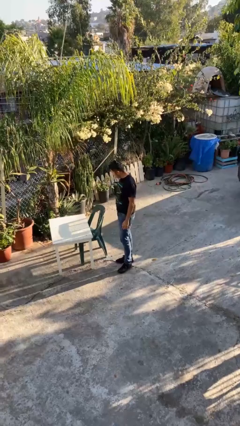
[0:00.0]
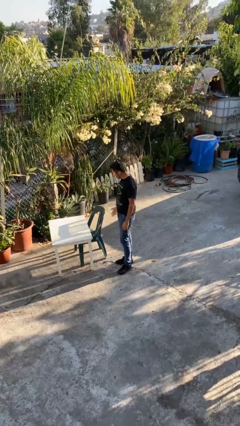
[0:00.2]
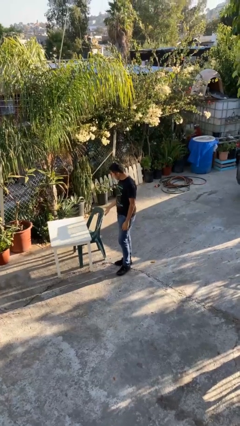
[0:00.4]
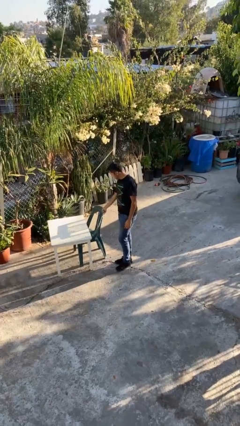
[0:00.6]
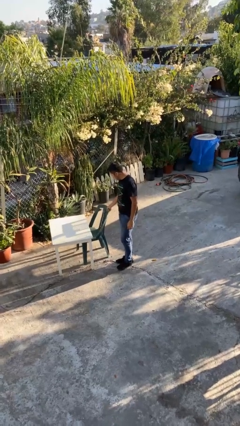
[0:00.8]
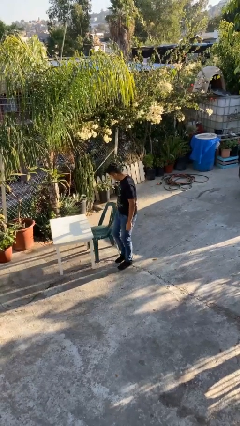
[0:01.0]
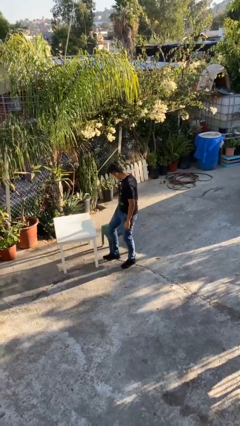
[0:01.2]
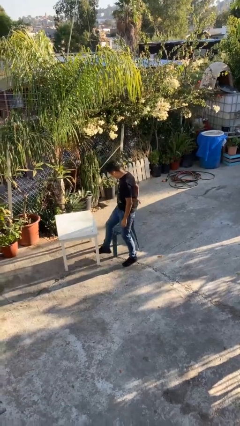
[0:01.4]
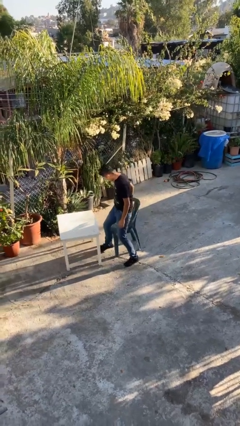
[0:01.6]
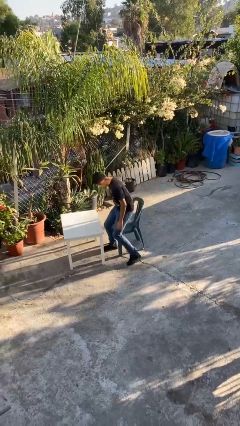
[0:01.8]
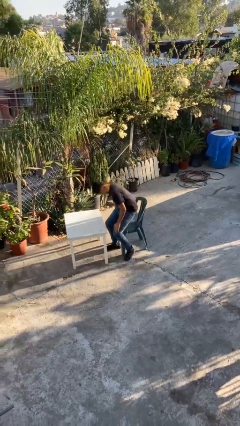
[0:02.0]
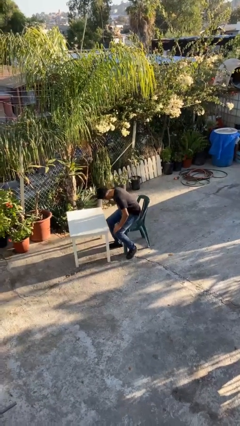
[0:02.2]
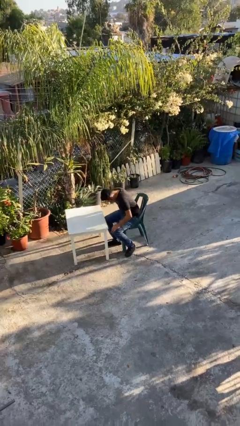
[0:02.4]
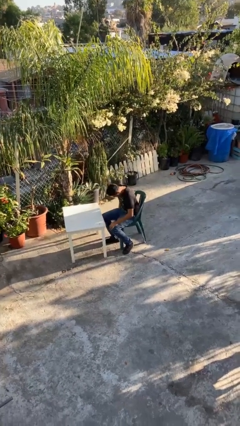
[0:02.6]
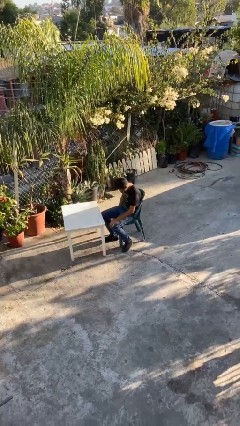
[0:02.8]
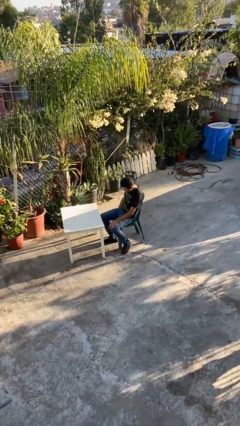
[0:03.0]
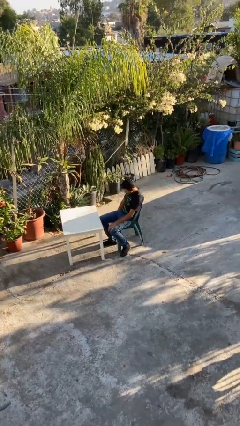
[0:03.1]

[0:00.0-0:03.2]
person sits down

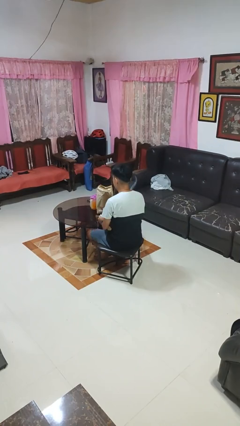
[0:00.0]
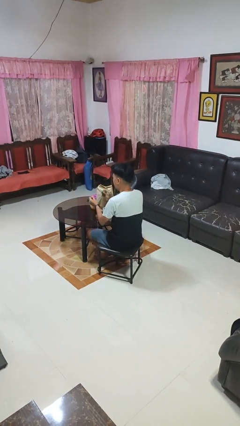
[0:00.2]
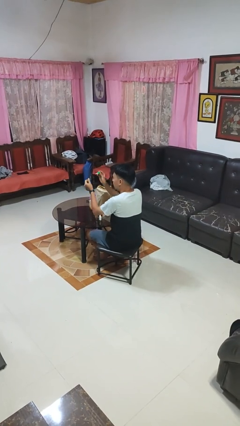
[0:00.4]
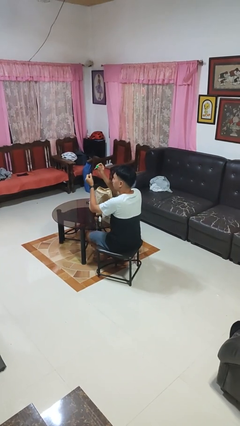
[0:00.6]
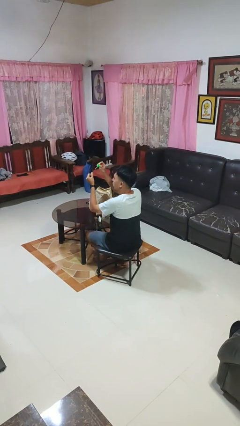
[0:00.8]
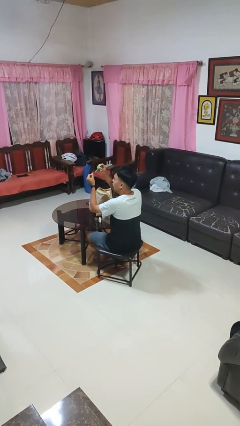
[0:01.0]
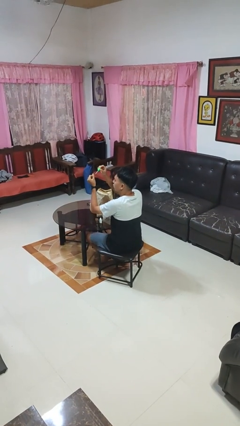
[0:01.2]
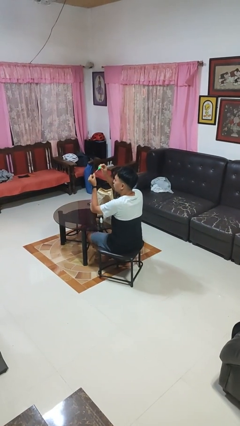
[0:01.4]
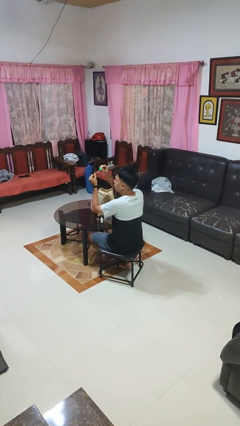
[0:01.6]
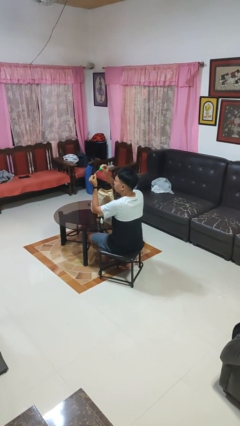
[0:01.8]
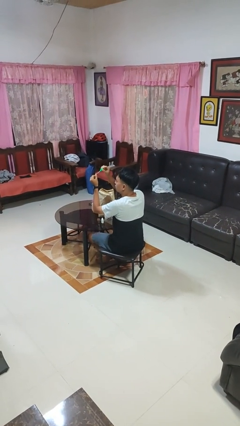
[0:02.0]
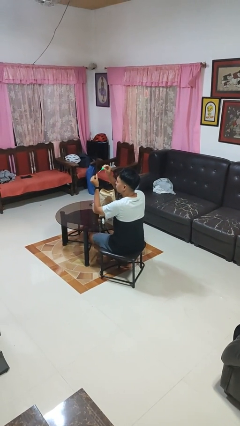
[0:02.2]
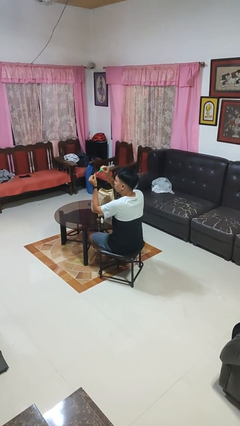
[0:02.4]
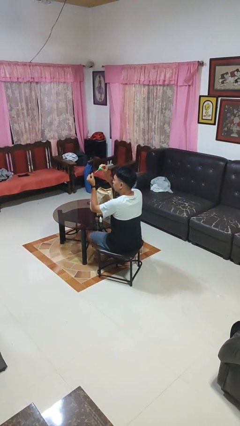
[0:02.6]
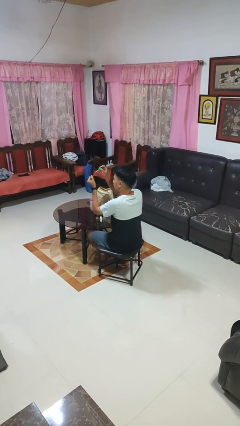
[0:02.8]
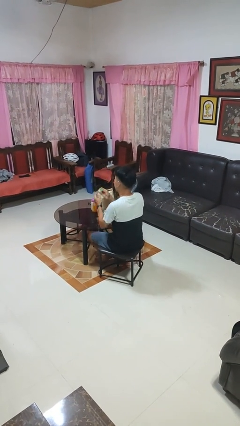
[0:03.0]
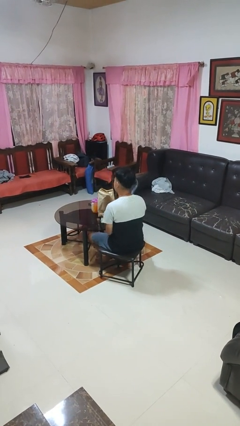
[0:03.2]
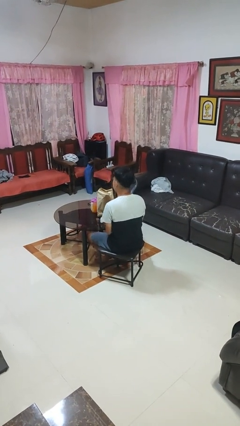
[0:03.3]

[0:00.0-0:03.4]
person paints fingernails

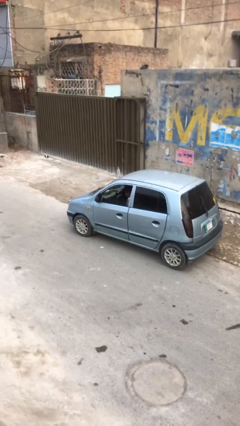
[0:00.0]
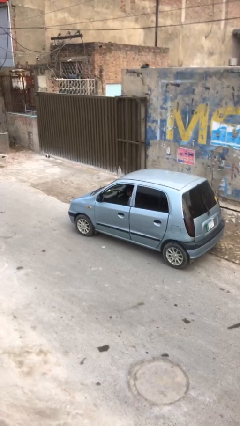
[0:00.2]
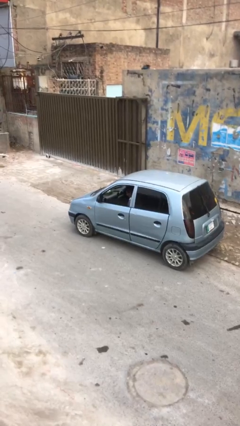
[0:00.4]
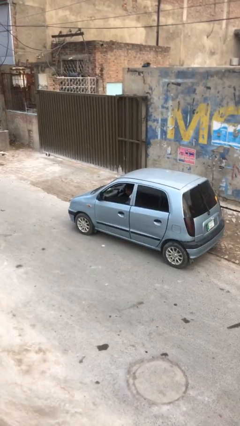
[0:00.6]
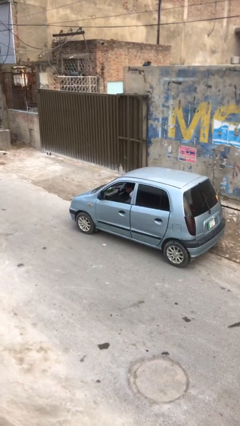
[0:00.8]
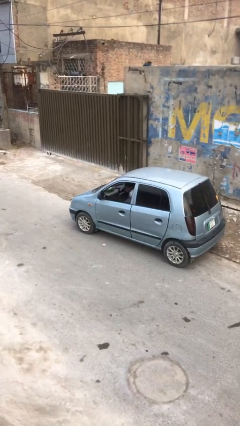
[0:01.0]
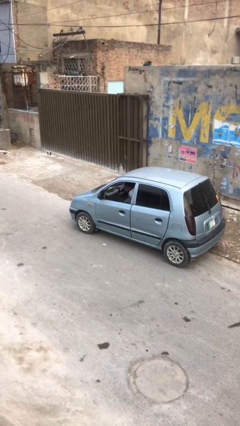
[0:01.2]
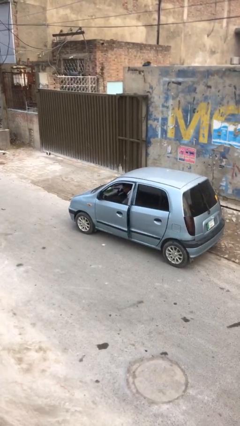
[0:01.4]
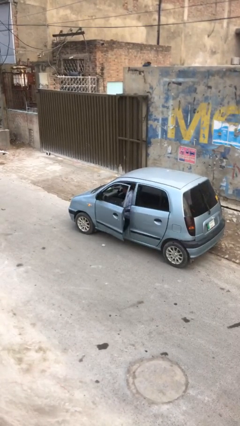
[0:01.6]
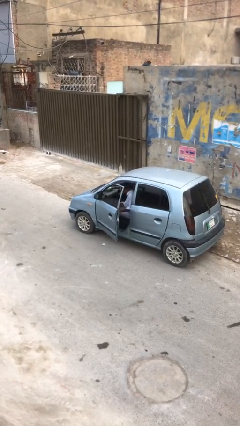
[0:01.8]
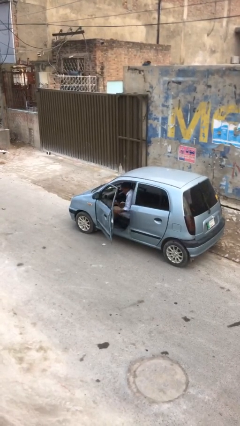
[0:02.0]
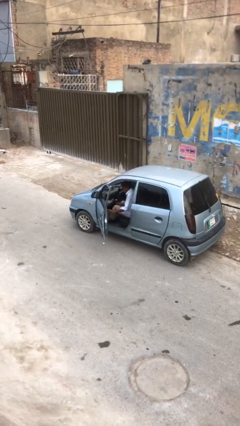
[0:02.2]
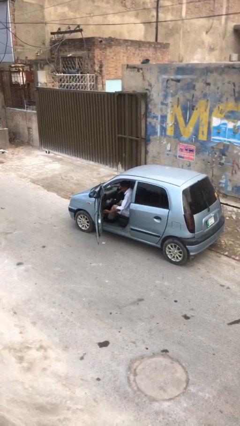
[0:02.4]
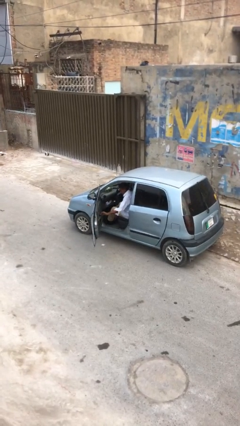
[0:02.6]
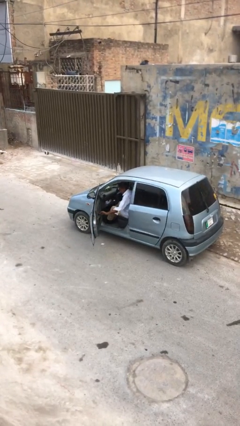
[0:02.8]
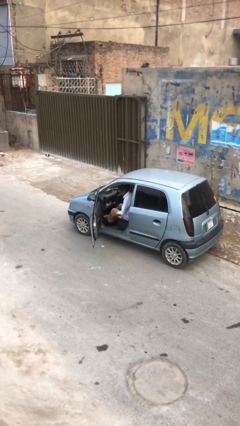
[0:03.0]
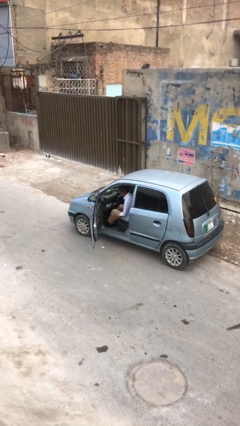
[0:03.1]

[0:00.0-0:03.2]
person opens car door

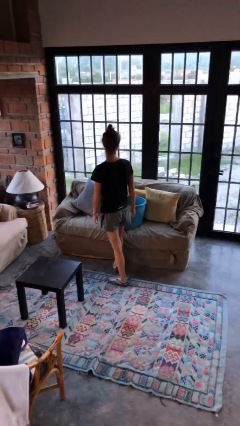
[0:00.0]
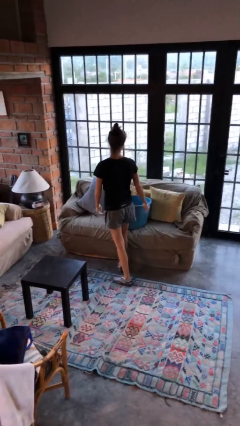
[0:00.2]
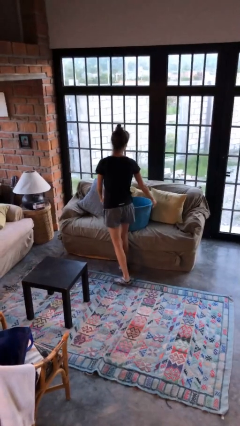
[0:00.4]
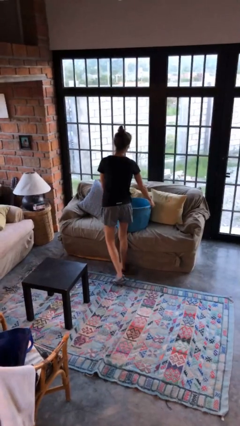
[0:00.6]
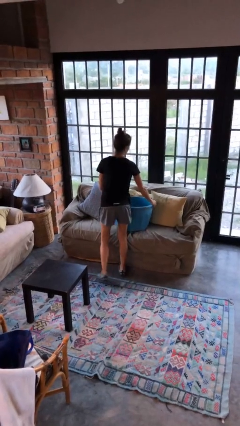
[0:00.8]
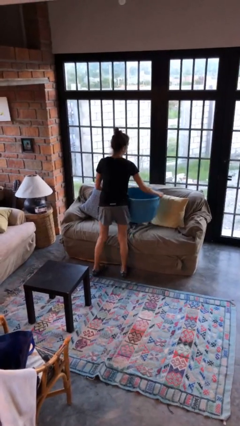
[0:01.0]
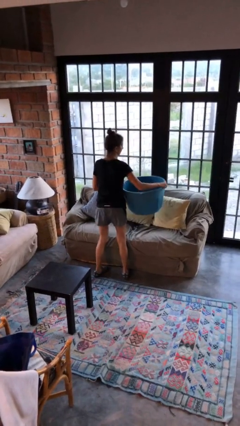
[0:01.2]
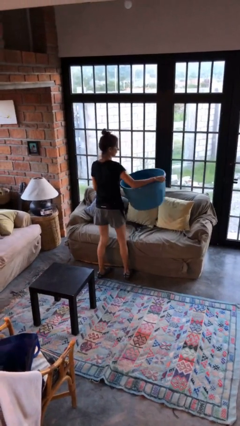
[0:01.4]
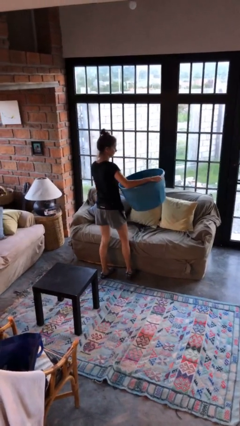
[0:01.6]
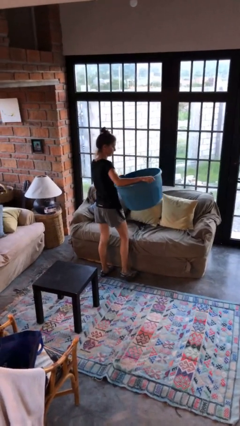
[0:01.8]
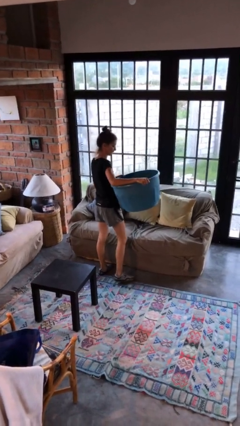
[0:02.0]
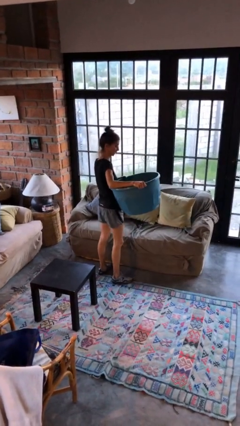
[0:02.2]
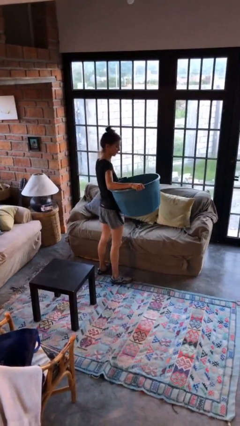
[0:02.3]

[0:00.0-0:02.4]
person picks up object from couch

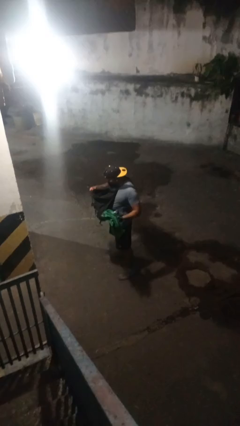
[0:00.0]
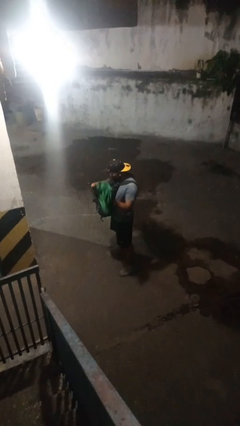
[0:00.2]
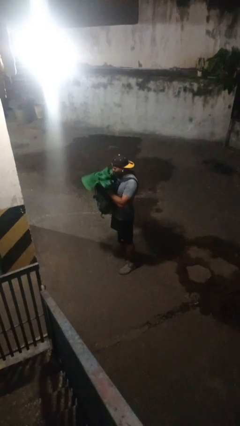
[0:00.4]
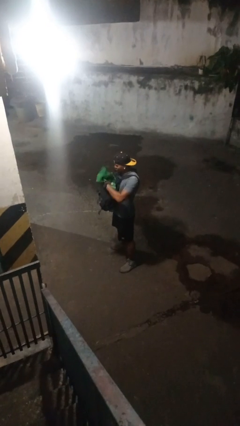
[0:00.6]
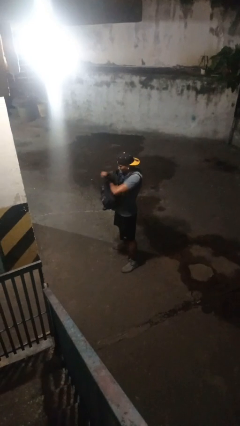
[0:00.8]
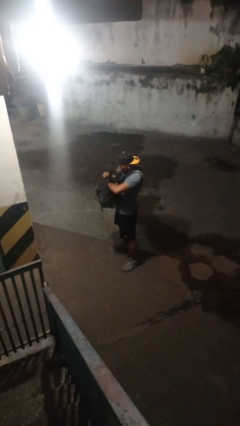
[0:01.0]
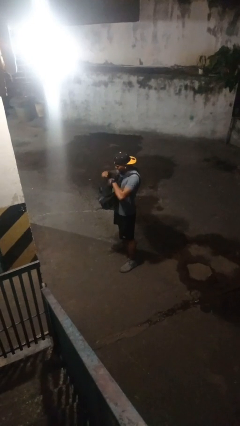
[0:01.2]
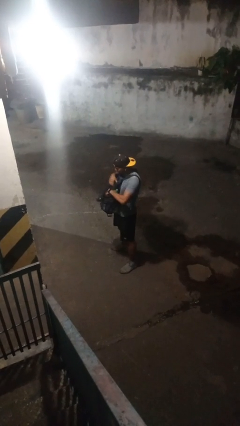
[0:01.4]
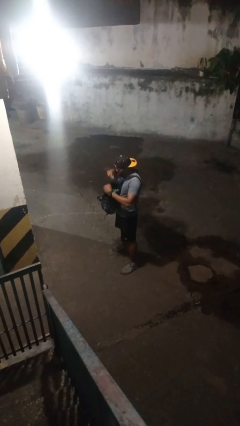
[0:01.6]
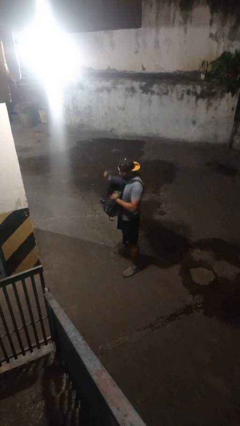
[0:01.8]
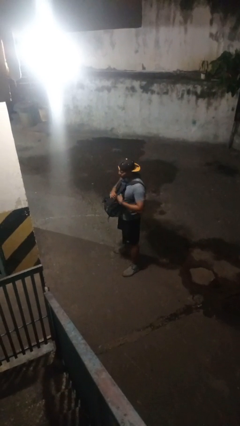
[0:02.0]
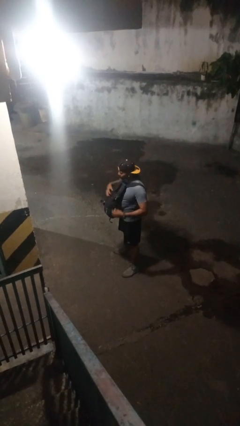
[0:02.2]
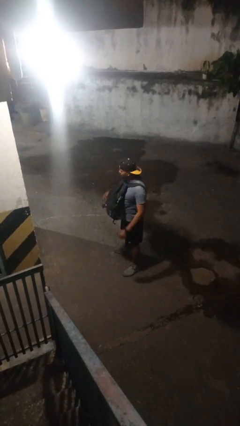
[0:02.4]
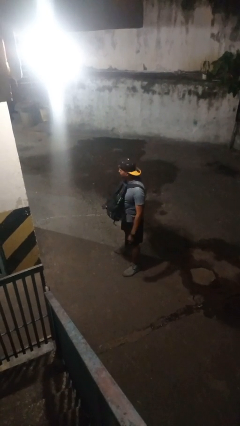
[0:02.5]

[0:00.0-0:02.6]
person puts object into backpack

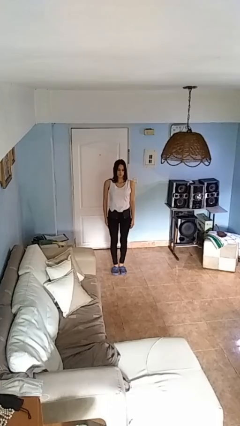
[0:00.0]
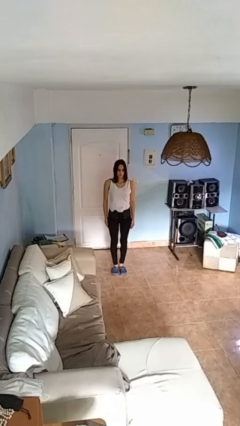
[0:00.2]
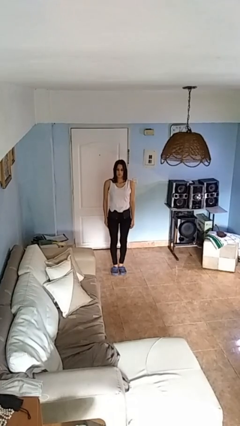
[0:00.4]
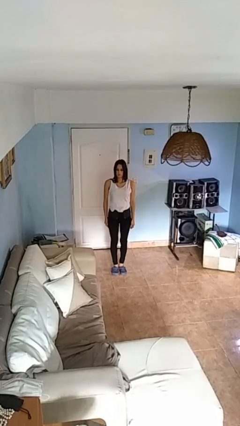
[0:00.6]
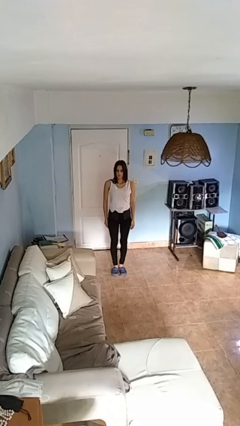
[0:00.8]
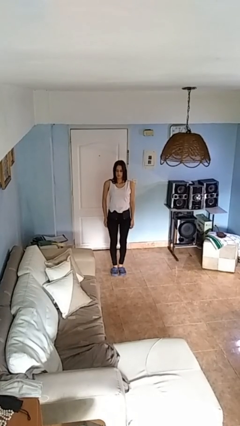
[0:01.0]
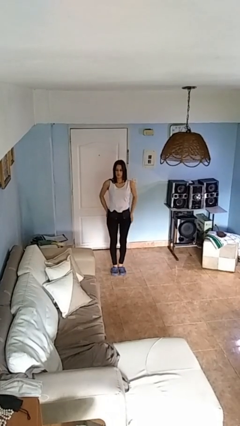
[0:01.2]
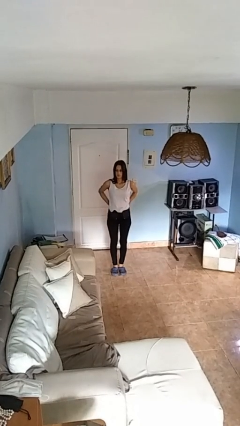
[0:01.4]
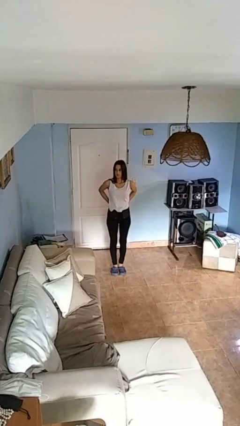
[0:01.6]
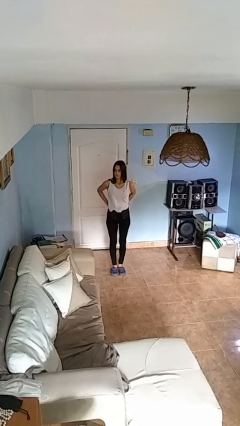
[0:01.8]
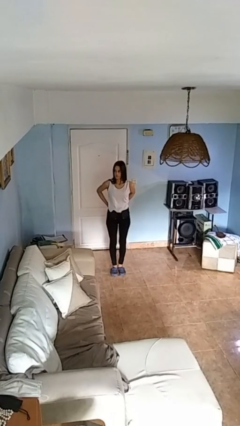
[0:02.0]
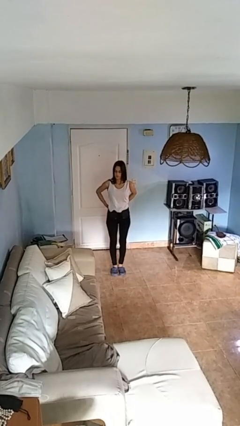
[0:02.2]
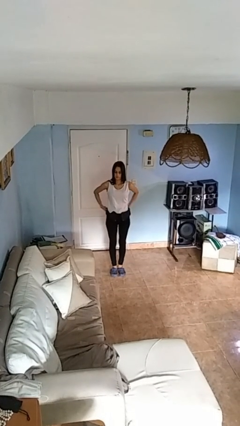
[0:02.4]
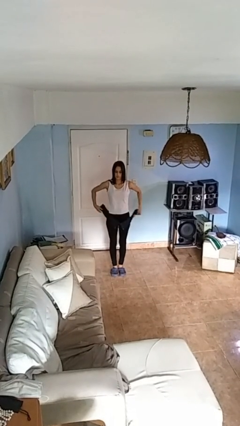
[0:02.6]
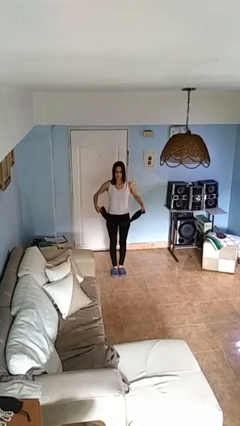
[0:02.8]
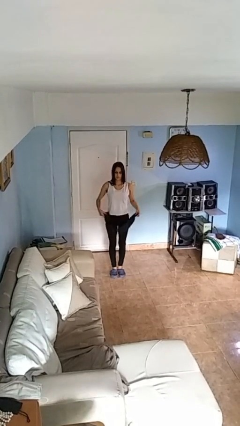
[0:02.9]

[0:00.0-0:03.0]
person takes off belt
